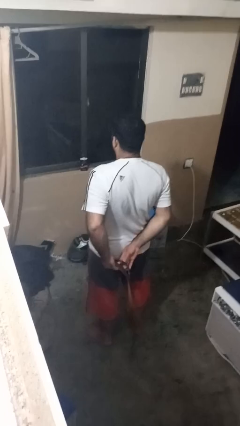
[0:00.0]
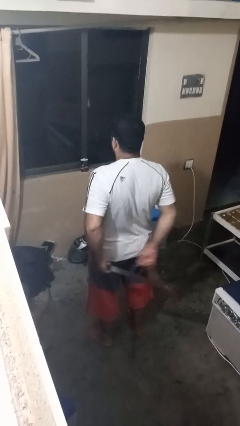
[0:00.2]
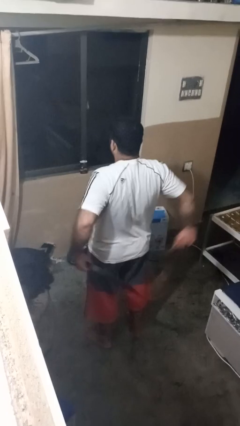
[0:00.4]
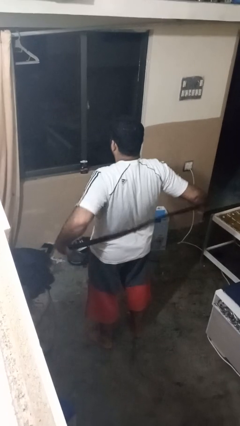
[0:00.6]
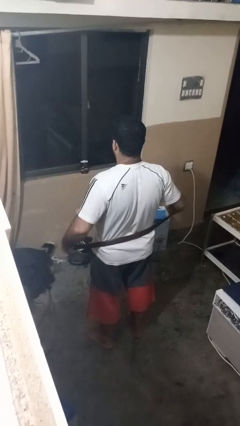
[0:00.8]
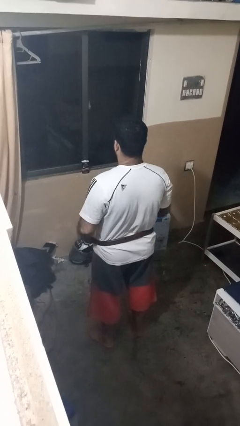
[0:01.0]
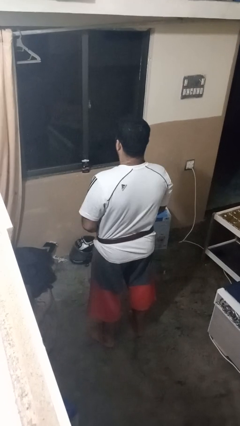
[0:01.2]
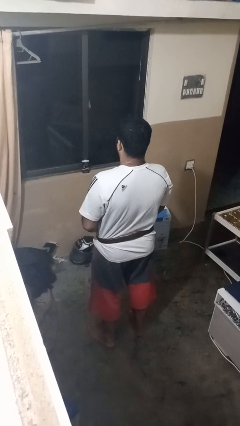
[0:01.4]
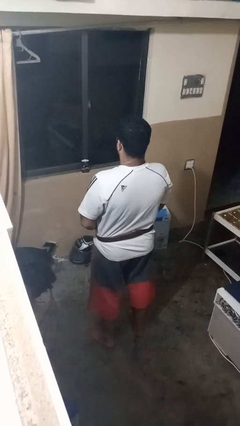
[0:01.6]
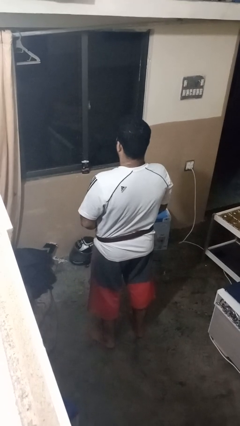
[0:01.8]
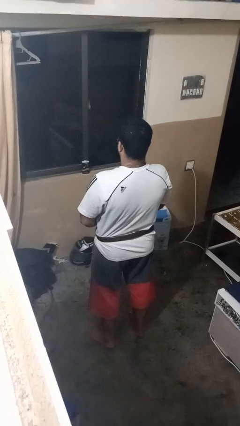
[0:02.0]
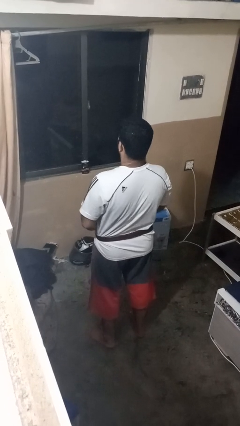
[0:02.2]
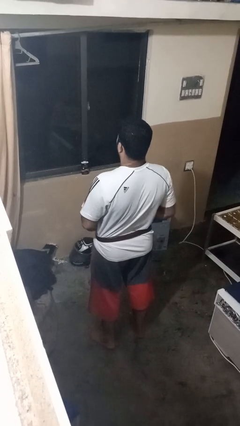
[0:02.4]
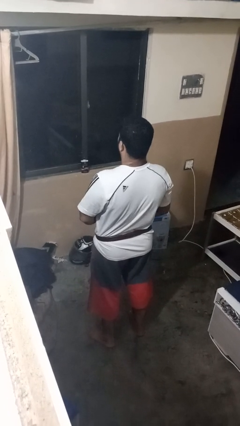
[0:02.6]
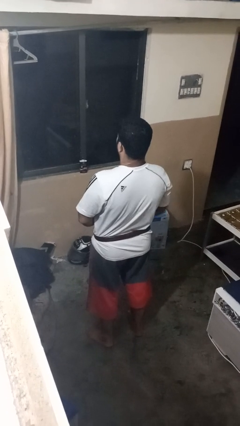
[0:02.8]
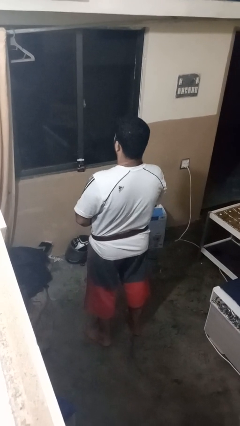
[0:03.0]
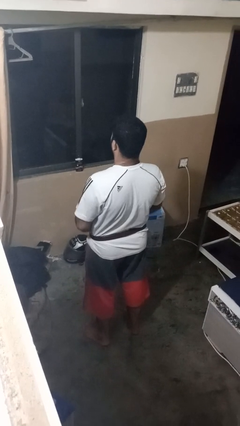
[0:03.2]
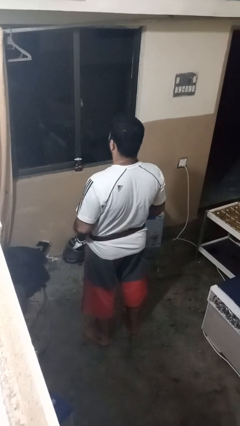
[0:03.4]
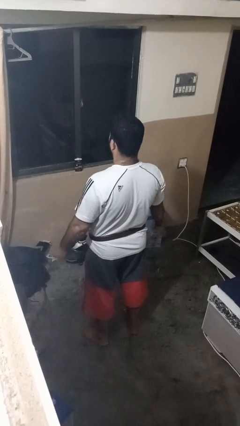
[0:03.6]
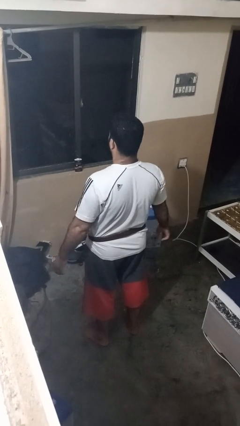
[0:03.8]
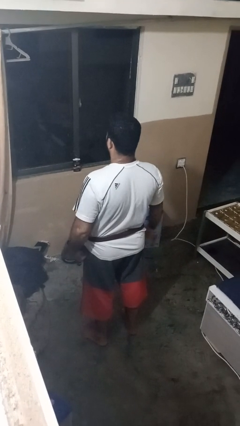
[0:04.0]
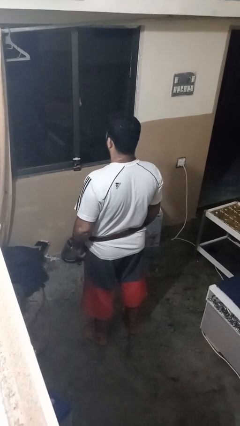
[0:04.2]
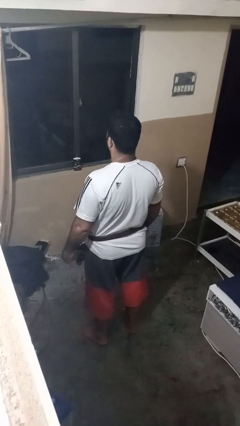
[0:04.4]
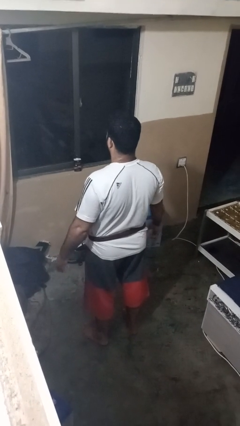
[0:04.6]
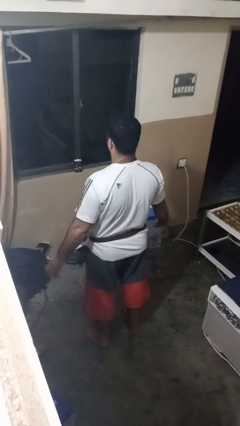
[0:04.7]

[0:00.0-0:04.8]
person puts on belt

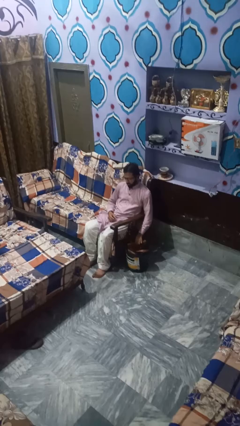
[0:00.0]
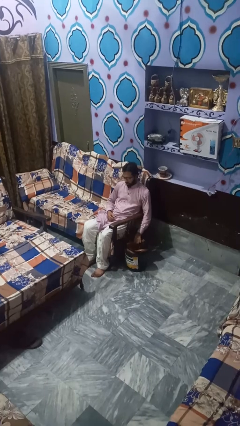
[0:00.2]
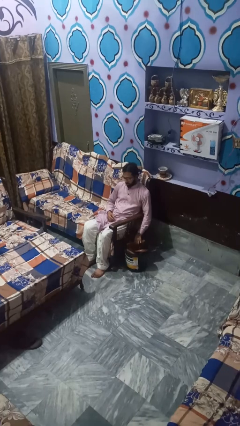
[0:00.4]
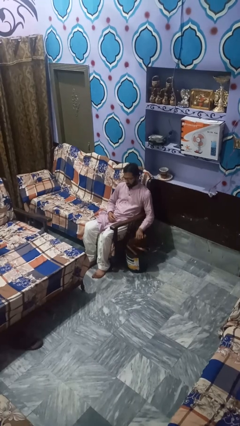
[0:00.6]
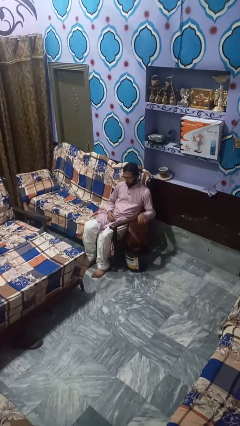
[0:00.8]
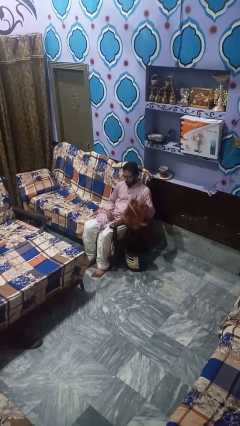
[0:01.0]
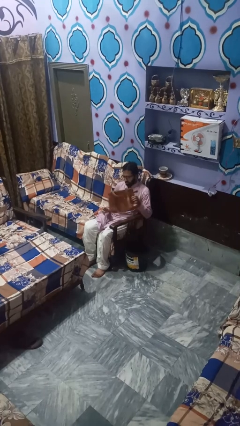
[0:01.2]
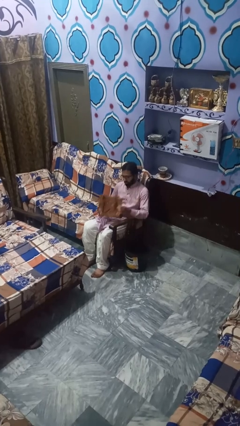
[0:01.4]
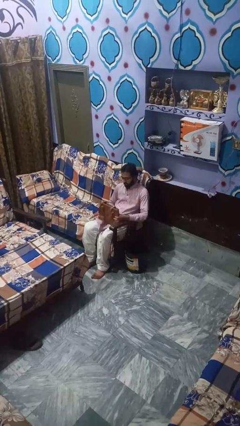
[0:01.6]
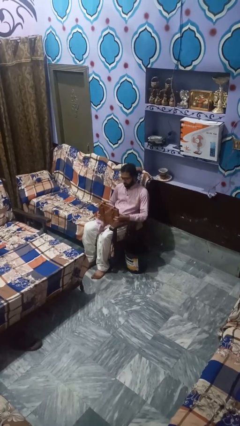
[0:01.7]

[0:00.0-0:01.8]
person takes object from basket

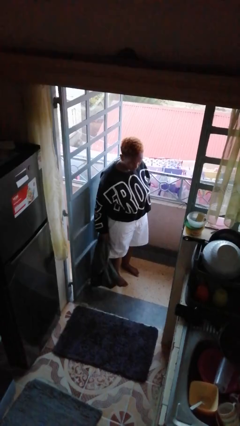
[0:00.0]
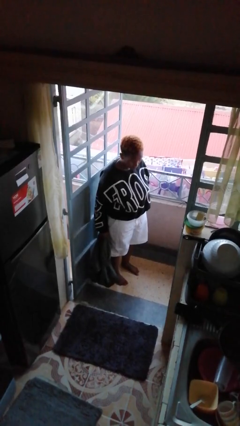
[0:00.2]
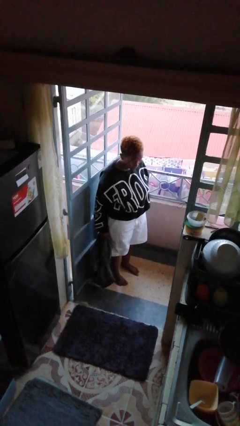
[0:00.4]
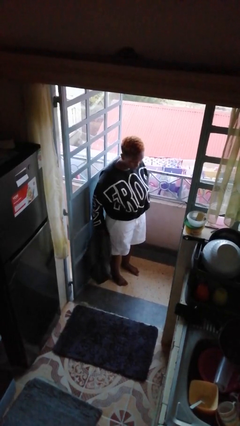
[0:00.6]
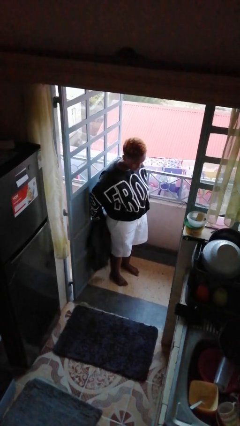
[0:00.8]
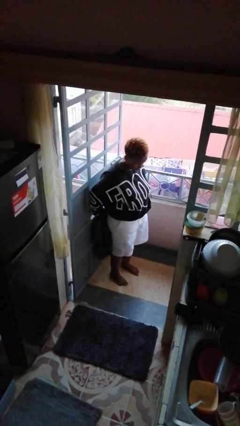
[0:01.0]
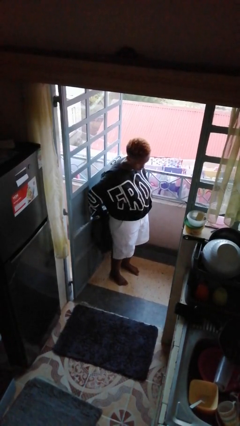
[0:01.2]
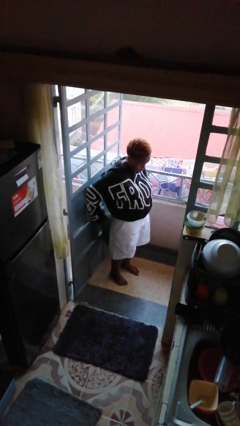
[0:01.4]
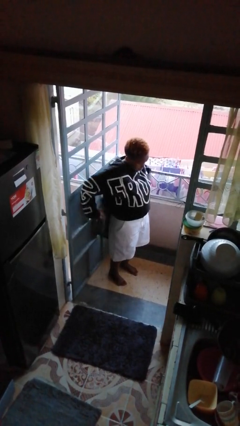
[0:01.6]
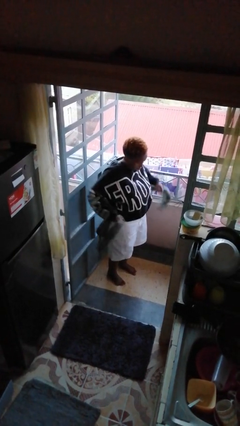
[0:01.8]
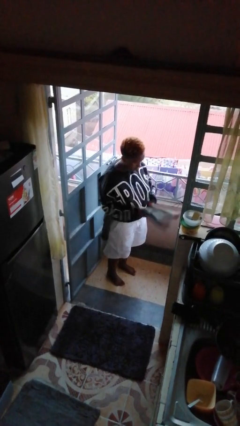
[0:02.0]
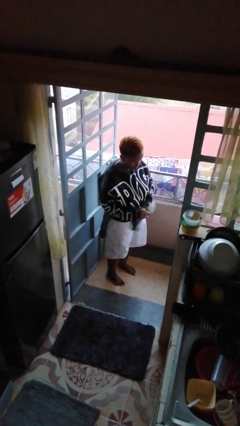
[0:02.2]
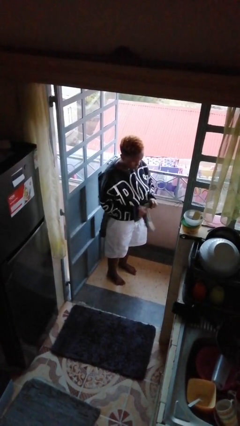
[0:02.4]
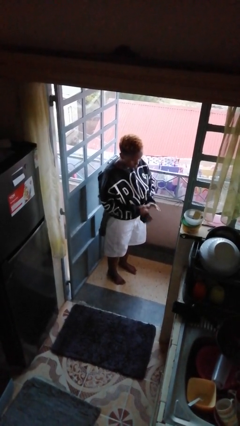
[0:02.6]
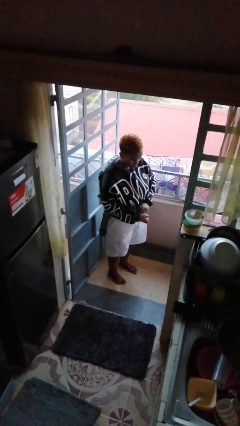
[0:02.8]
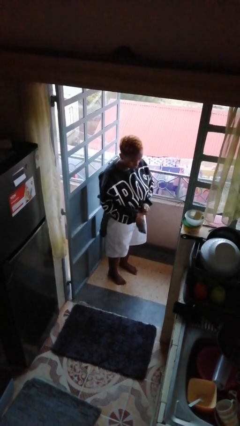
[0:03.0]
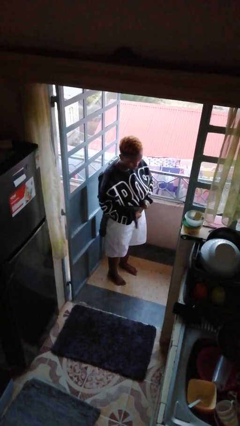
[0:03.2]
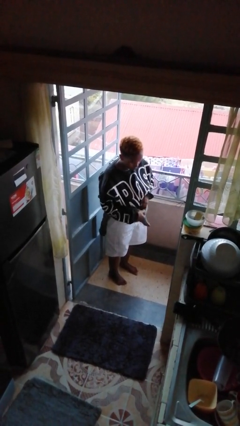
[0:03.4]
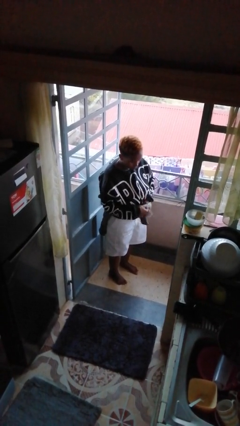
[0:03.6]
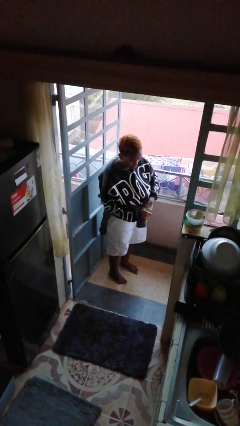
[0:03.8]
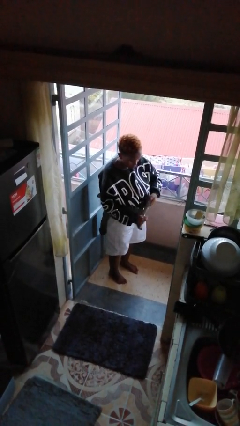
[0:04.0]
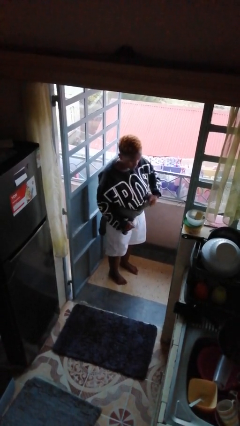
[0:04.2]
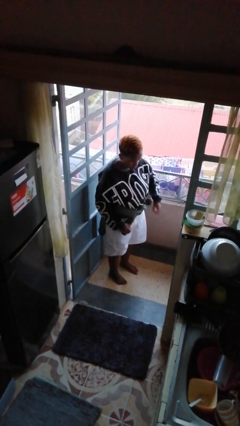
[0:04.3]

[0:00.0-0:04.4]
person ties jacket around waist

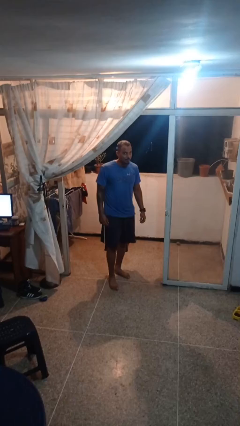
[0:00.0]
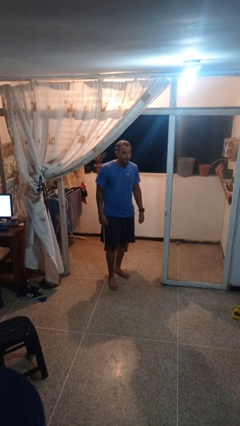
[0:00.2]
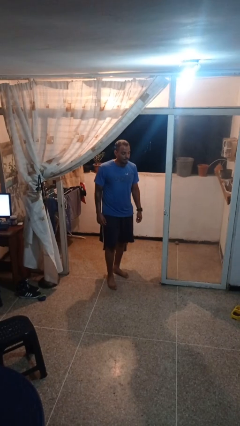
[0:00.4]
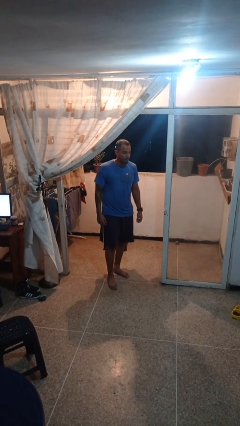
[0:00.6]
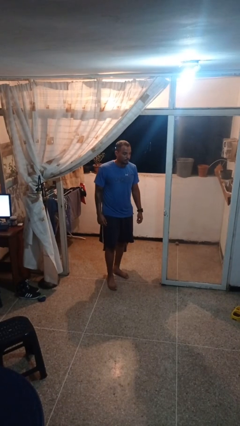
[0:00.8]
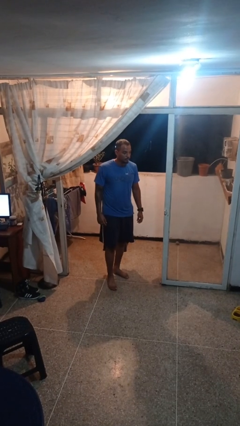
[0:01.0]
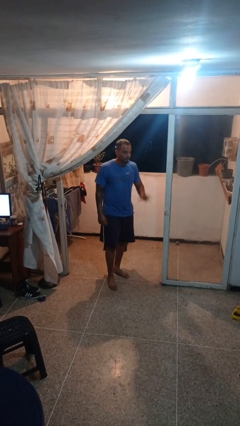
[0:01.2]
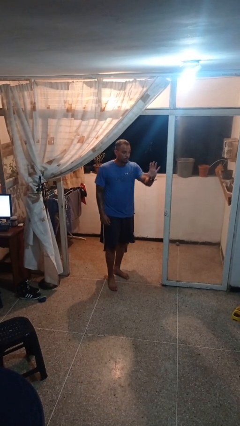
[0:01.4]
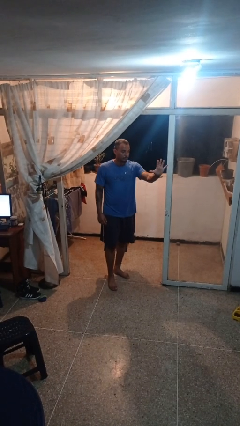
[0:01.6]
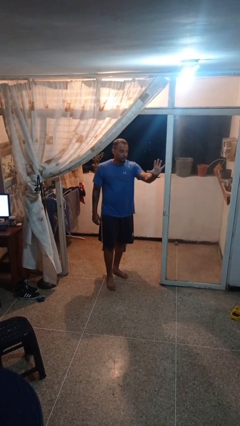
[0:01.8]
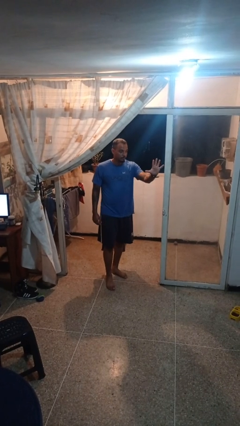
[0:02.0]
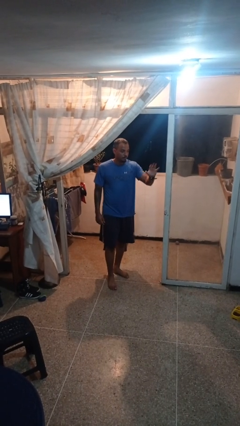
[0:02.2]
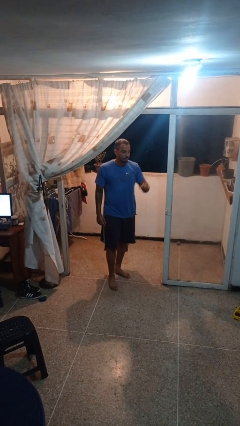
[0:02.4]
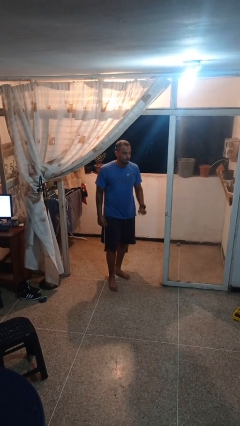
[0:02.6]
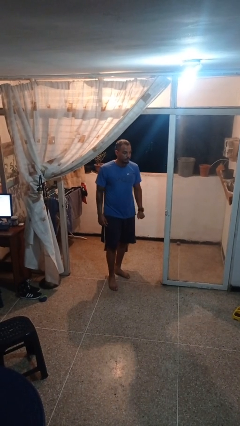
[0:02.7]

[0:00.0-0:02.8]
person gestures number five

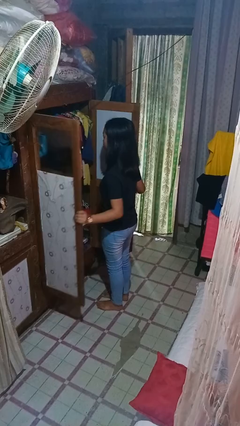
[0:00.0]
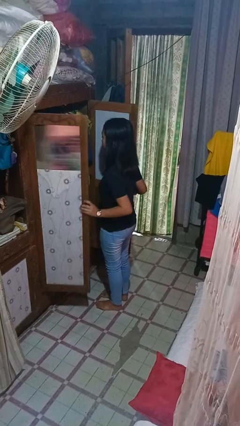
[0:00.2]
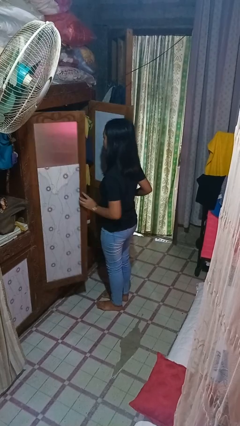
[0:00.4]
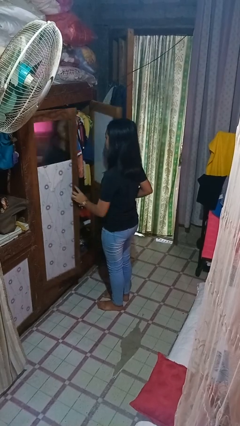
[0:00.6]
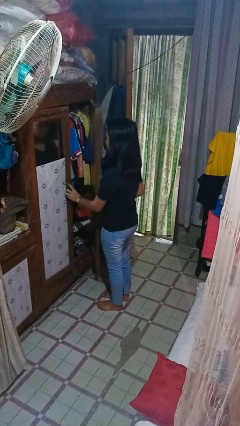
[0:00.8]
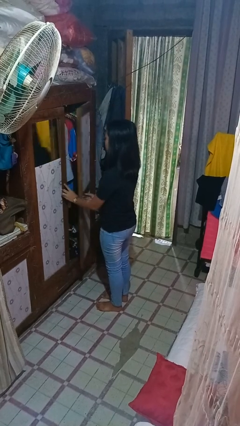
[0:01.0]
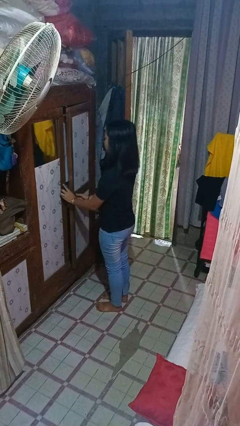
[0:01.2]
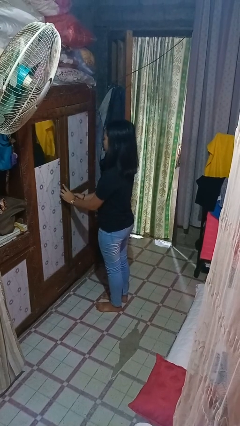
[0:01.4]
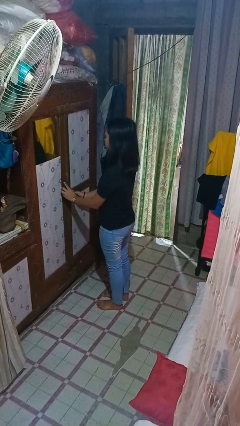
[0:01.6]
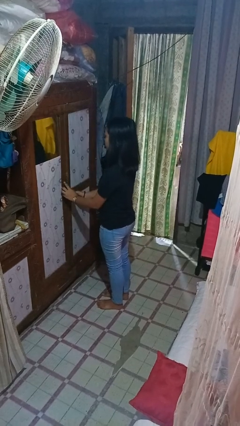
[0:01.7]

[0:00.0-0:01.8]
person closes closet door

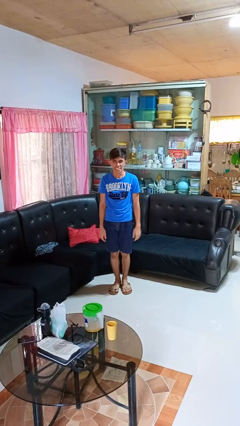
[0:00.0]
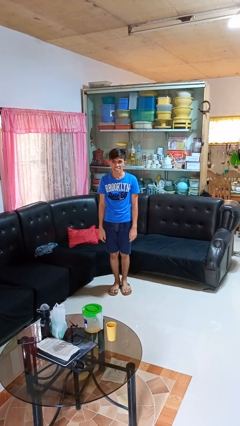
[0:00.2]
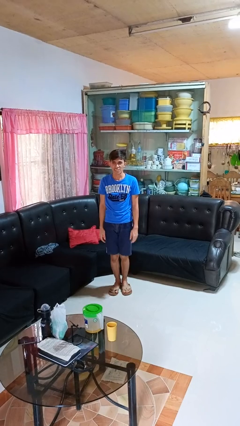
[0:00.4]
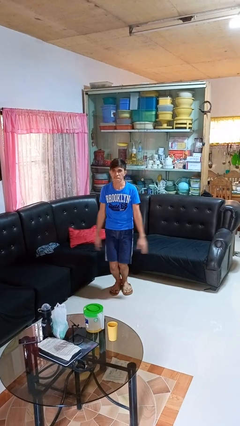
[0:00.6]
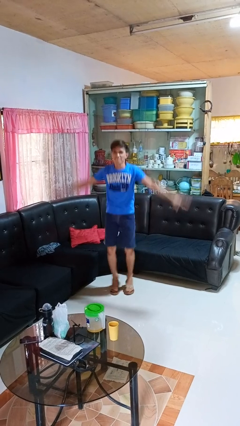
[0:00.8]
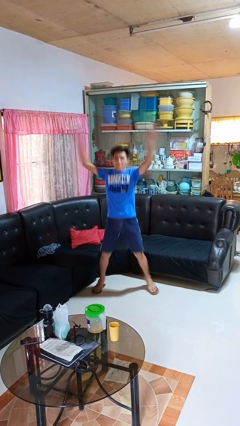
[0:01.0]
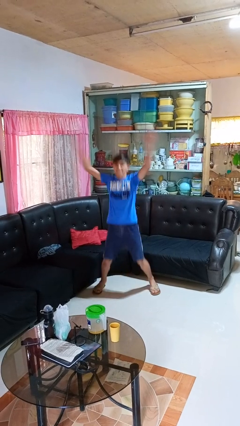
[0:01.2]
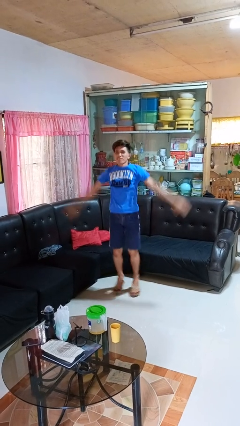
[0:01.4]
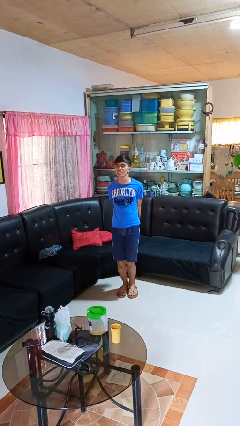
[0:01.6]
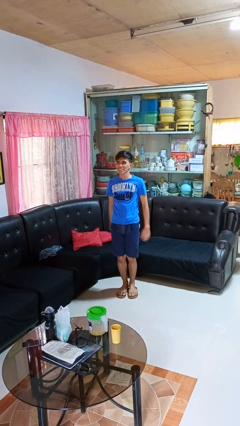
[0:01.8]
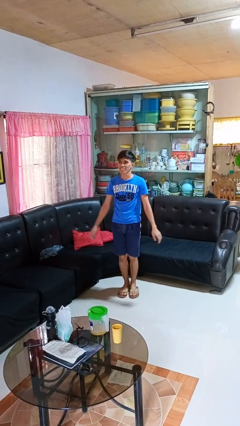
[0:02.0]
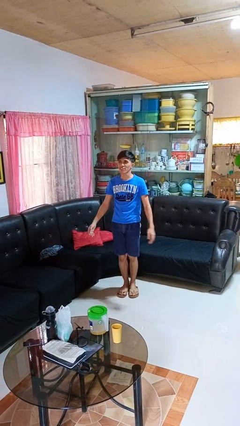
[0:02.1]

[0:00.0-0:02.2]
person exercises with jumping jacks
